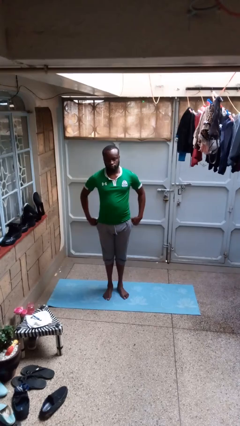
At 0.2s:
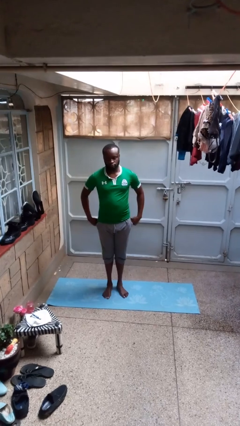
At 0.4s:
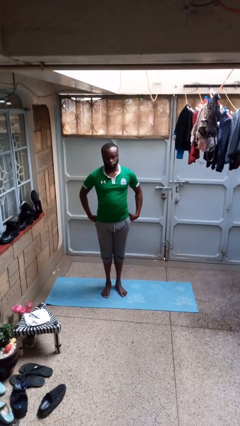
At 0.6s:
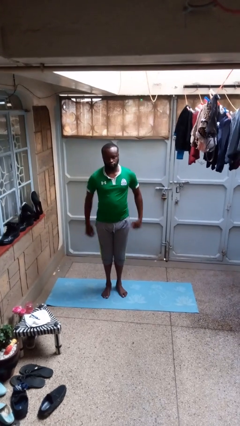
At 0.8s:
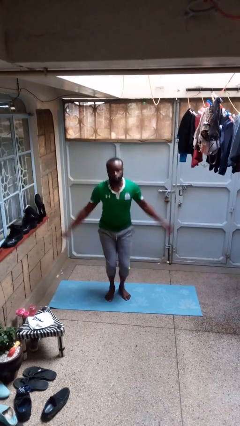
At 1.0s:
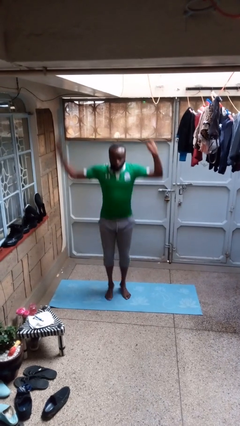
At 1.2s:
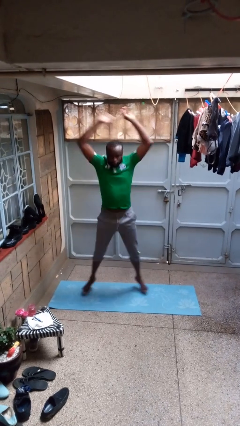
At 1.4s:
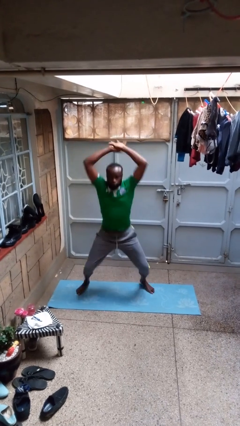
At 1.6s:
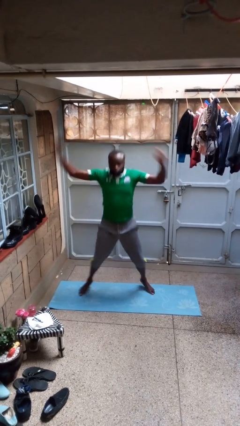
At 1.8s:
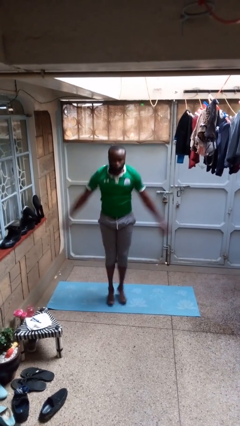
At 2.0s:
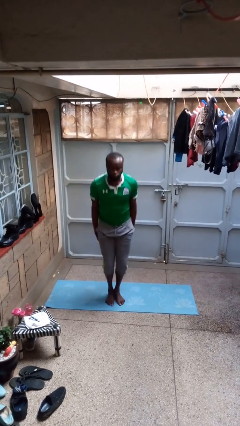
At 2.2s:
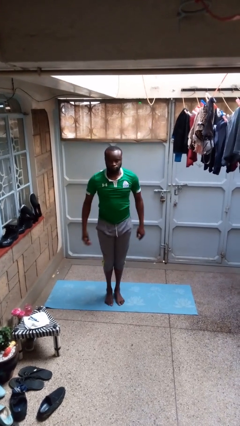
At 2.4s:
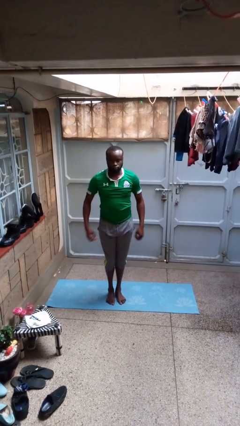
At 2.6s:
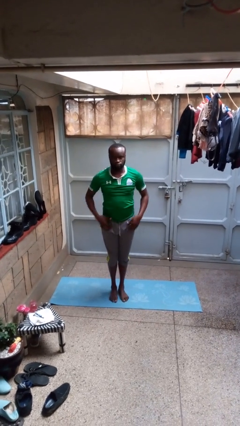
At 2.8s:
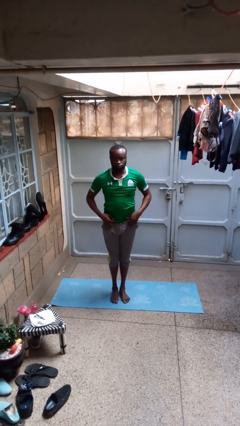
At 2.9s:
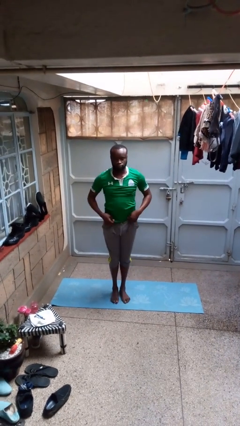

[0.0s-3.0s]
person exercises with jumping jacks

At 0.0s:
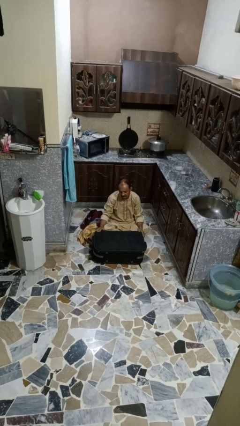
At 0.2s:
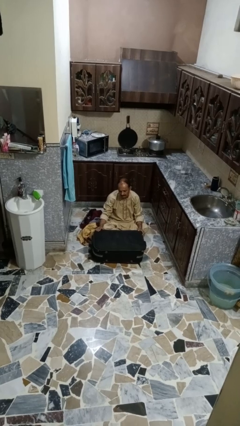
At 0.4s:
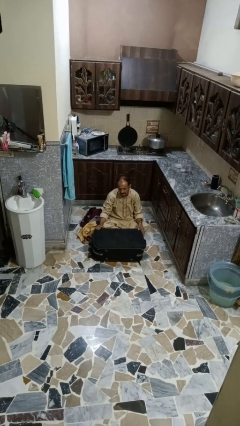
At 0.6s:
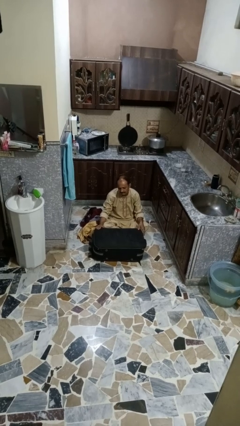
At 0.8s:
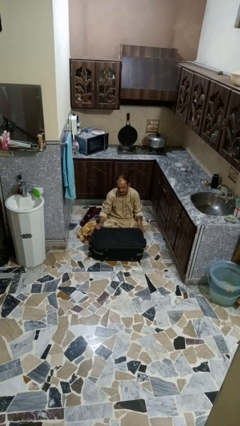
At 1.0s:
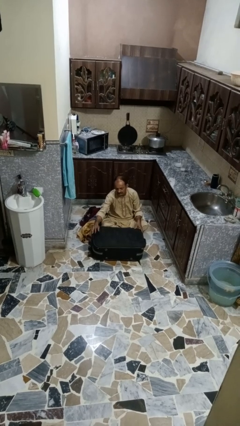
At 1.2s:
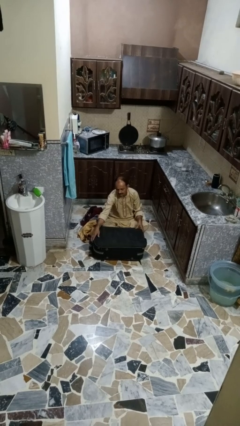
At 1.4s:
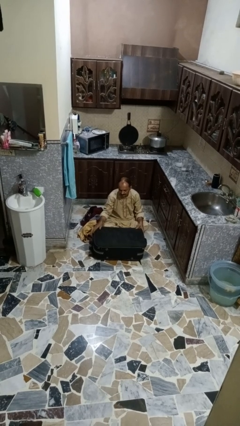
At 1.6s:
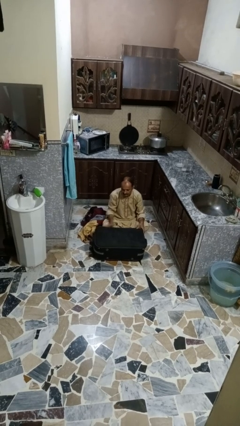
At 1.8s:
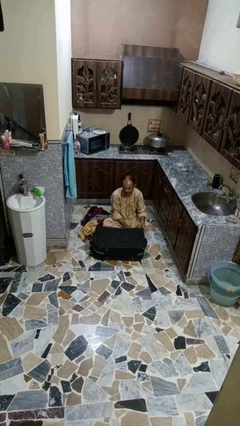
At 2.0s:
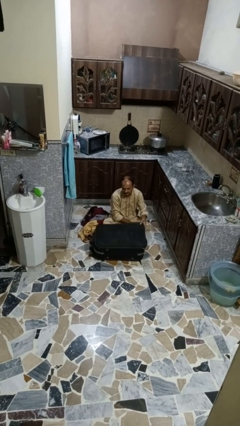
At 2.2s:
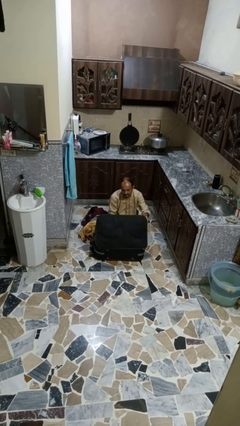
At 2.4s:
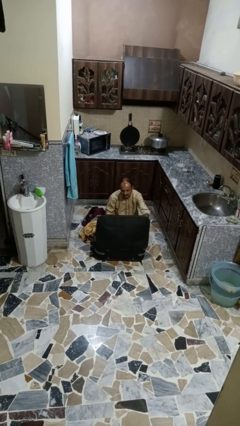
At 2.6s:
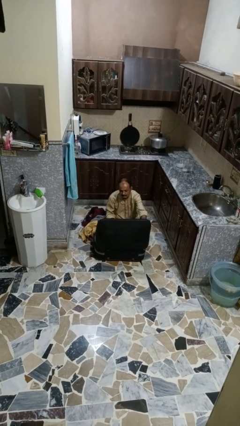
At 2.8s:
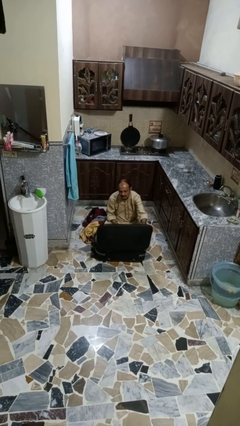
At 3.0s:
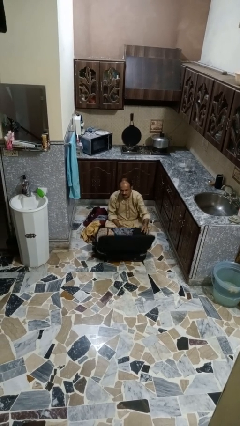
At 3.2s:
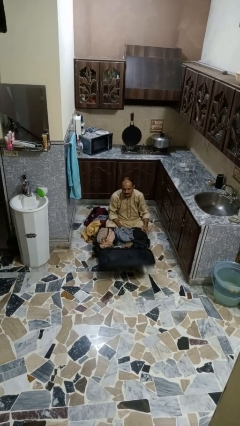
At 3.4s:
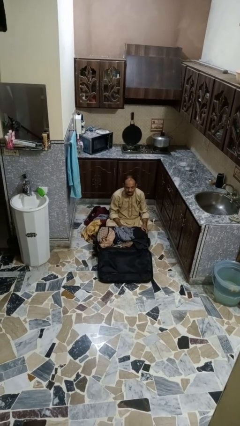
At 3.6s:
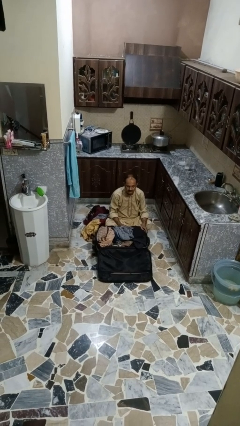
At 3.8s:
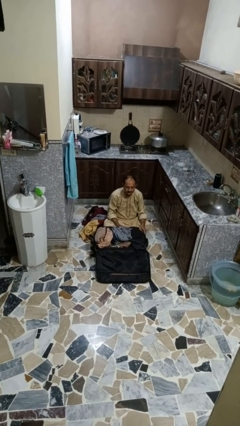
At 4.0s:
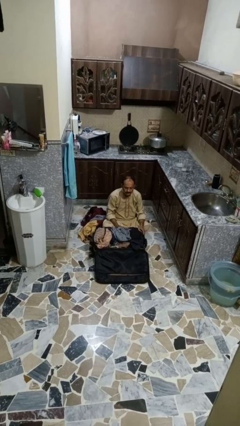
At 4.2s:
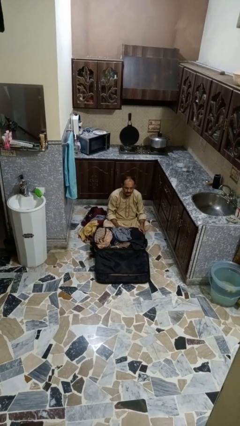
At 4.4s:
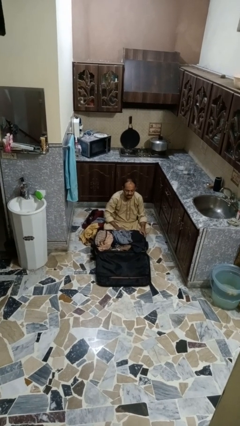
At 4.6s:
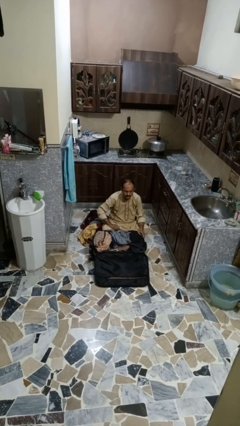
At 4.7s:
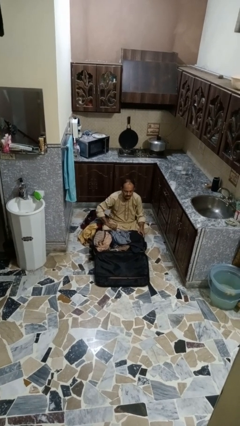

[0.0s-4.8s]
person opens suitcase

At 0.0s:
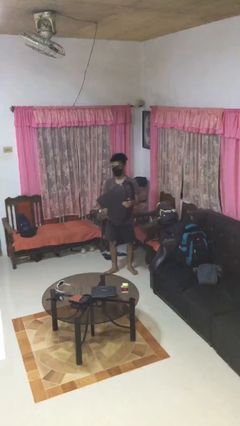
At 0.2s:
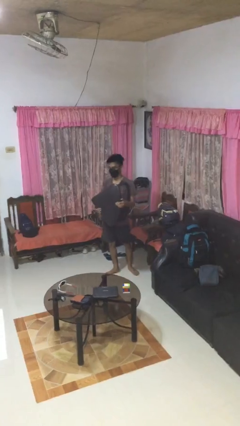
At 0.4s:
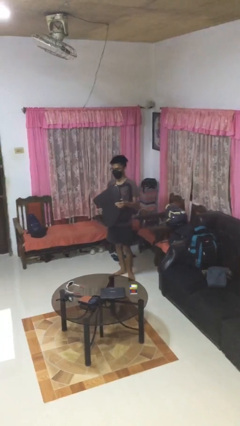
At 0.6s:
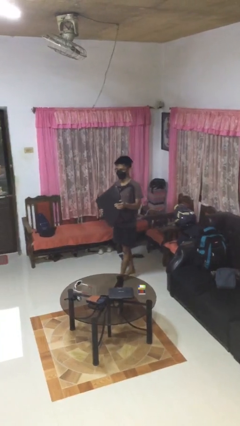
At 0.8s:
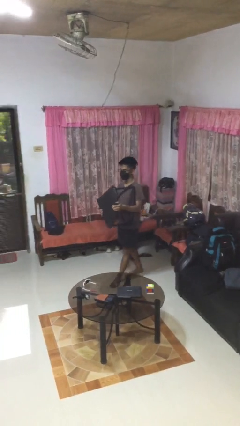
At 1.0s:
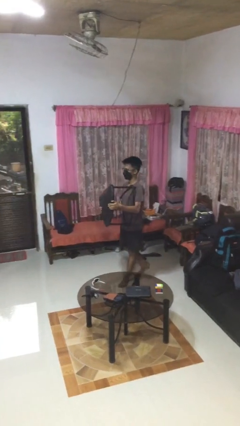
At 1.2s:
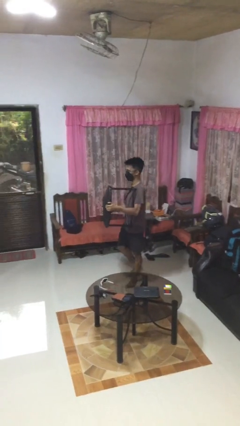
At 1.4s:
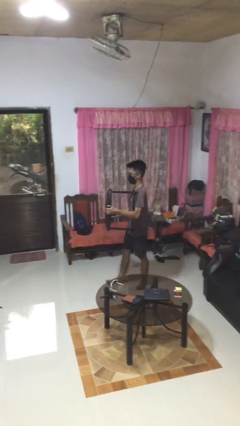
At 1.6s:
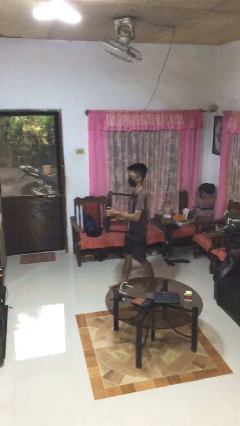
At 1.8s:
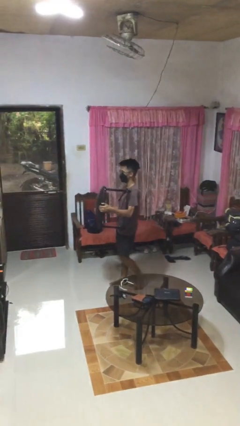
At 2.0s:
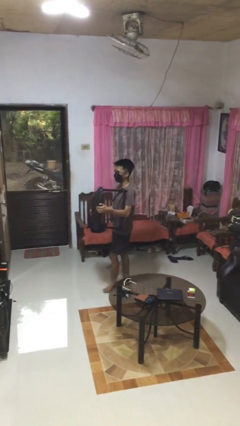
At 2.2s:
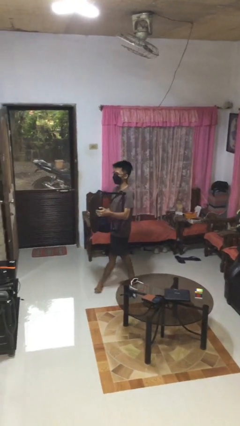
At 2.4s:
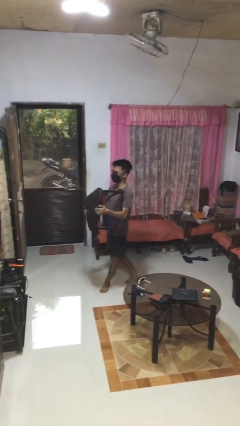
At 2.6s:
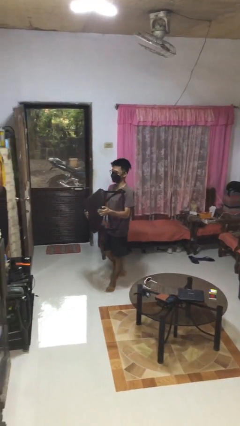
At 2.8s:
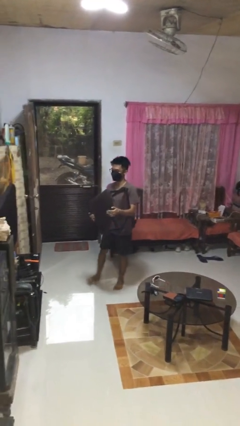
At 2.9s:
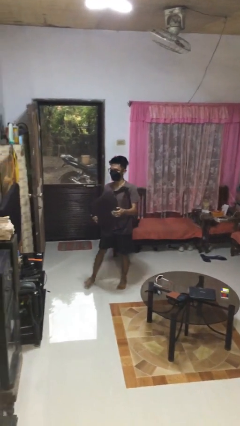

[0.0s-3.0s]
person carries furniture

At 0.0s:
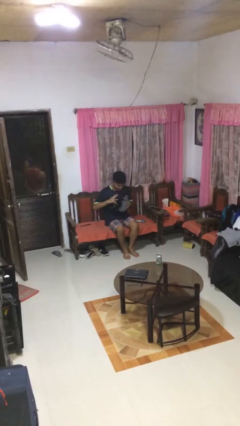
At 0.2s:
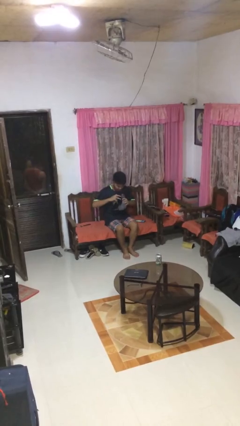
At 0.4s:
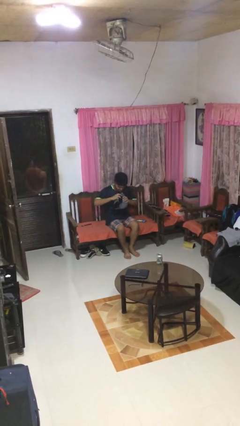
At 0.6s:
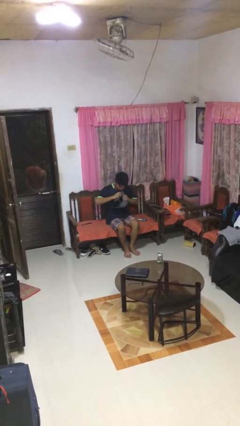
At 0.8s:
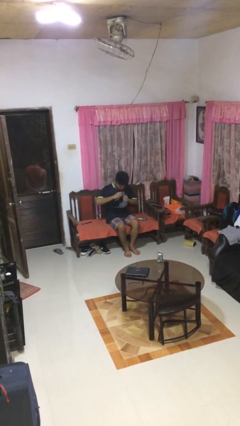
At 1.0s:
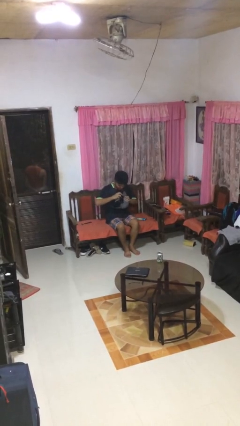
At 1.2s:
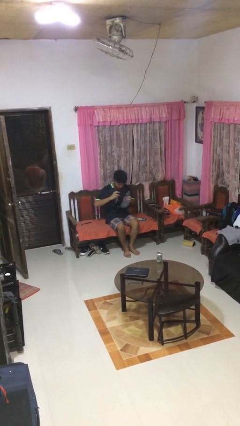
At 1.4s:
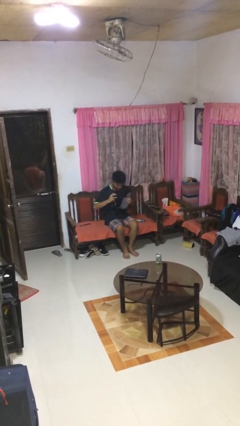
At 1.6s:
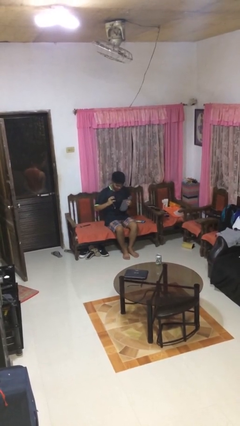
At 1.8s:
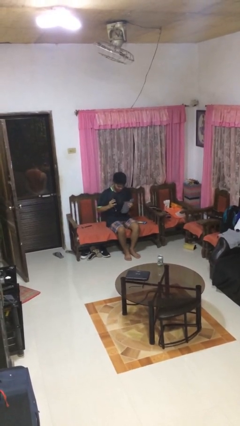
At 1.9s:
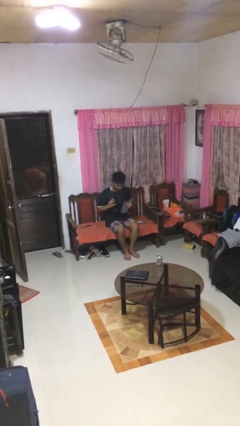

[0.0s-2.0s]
person squeezes object

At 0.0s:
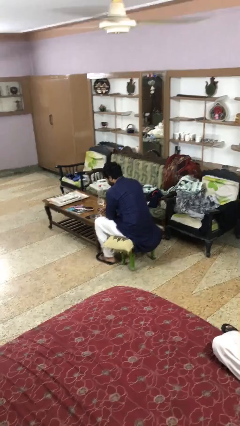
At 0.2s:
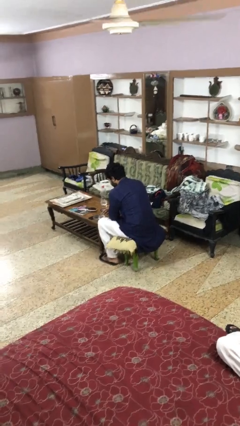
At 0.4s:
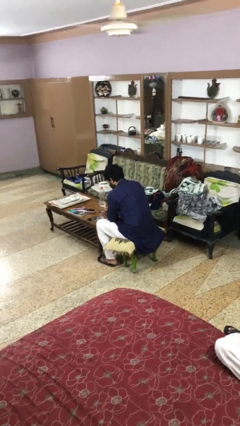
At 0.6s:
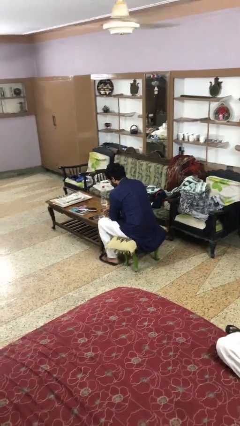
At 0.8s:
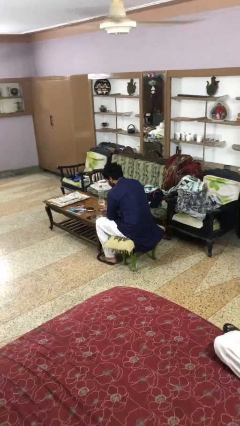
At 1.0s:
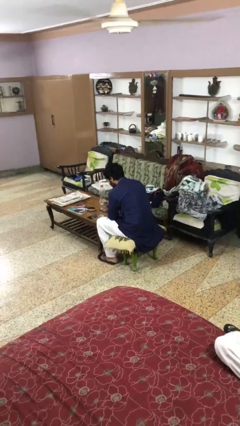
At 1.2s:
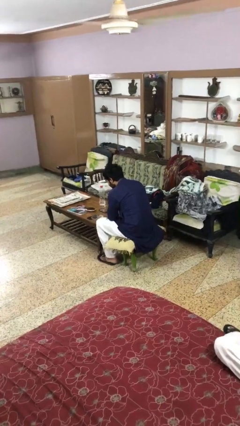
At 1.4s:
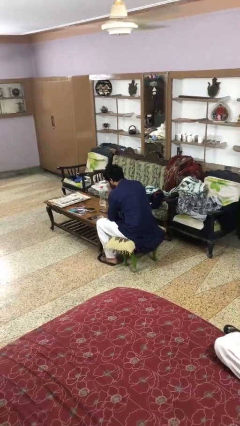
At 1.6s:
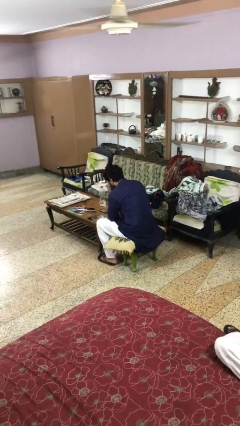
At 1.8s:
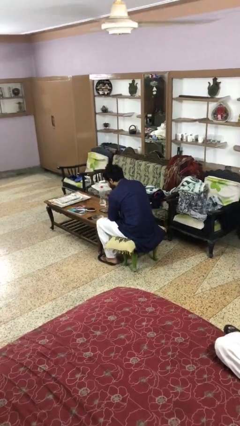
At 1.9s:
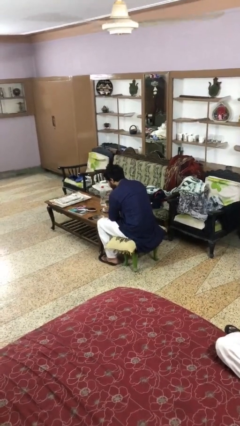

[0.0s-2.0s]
person eats with utensil

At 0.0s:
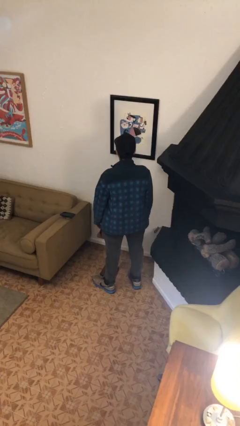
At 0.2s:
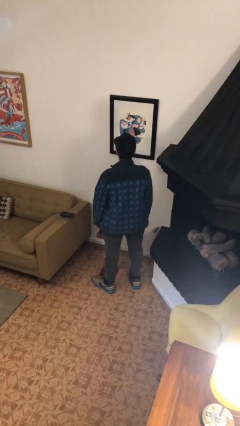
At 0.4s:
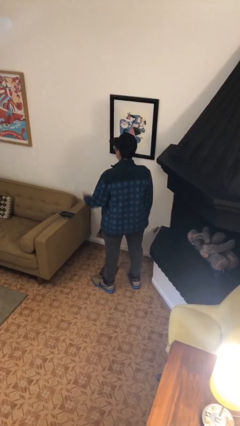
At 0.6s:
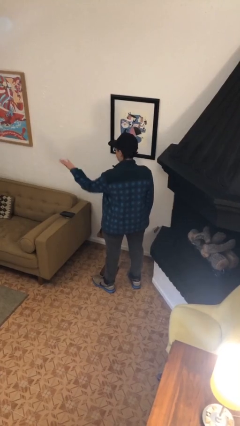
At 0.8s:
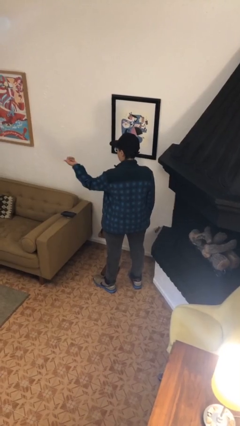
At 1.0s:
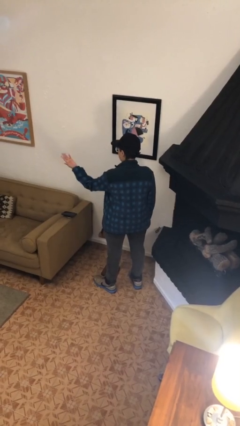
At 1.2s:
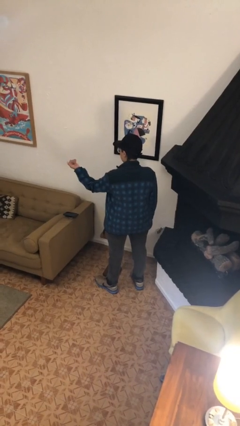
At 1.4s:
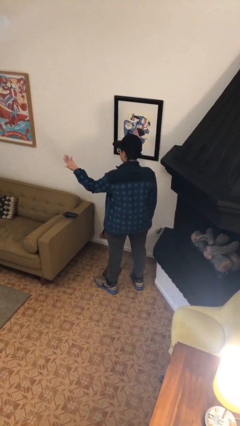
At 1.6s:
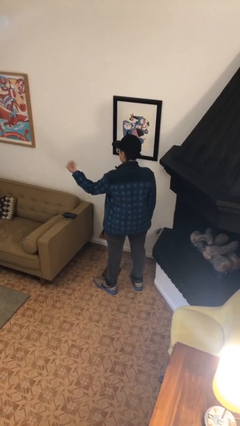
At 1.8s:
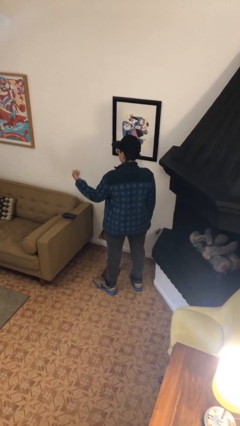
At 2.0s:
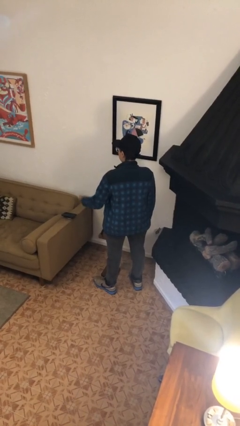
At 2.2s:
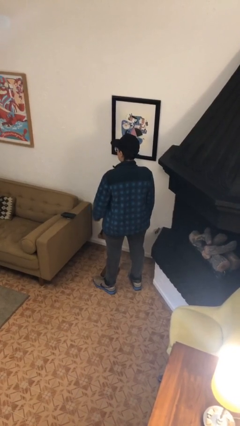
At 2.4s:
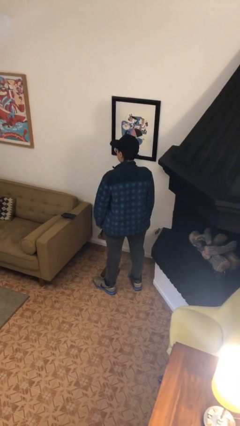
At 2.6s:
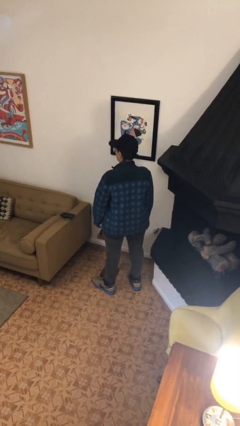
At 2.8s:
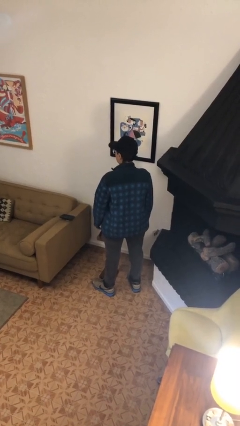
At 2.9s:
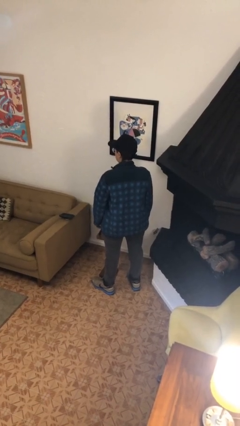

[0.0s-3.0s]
person gestures come here
